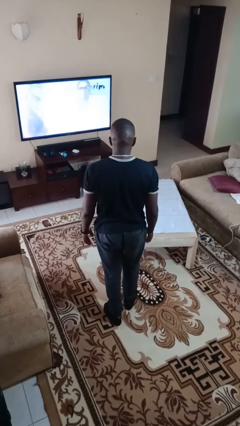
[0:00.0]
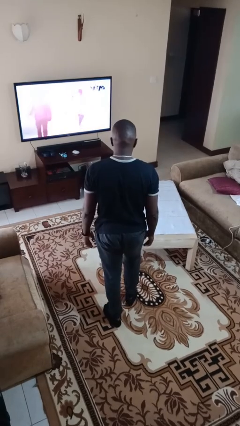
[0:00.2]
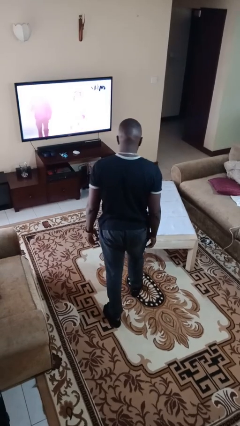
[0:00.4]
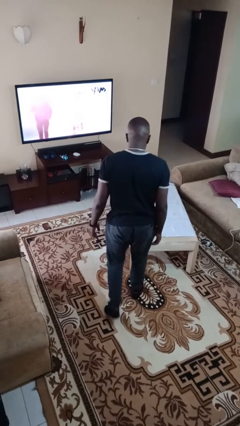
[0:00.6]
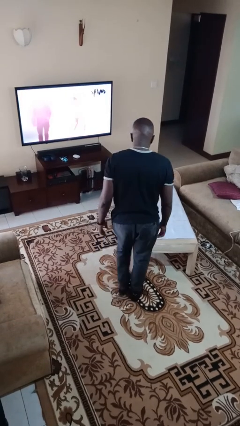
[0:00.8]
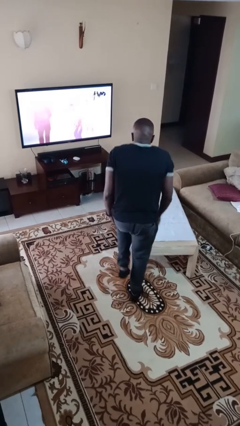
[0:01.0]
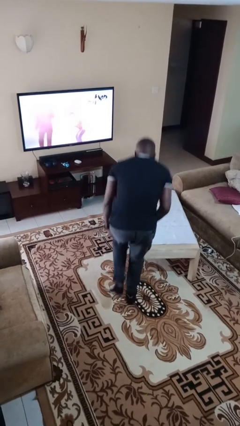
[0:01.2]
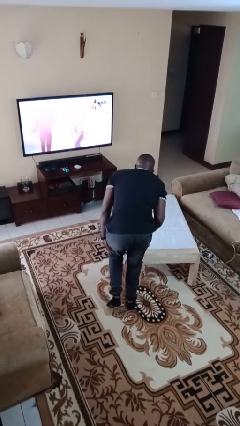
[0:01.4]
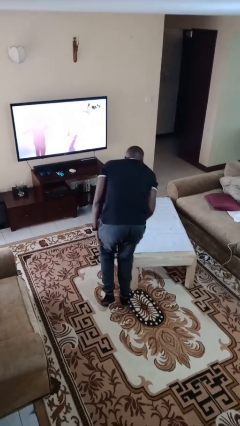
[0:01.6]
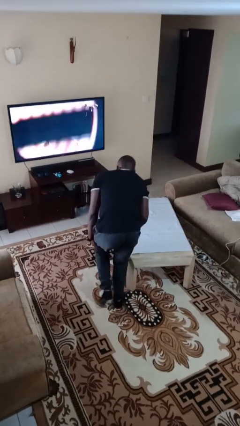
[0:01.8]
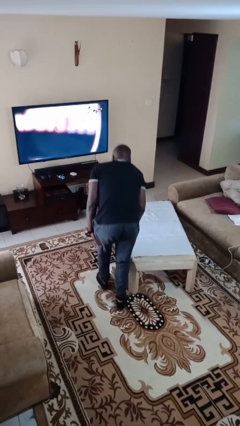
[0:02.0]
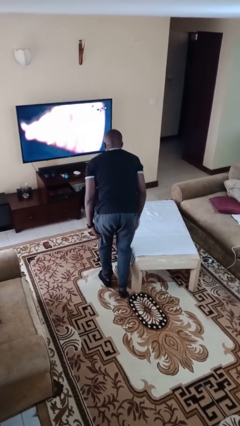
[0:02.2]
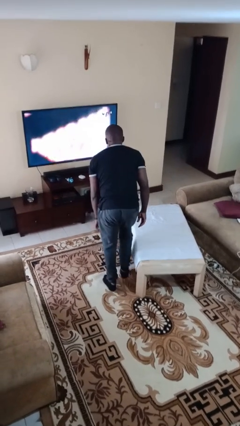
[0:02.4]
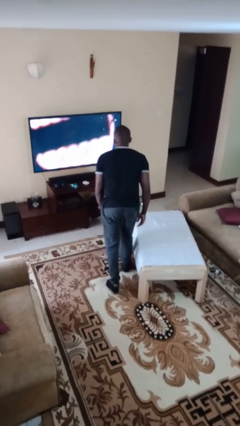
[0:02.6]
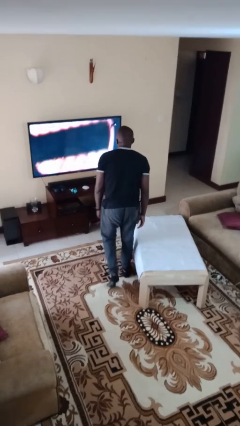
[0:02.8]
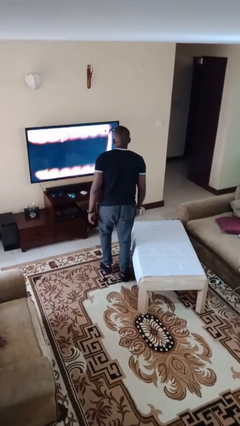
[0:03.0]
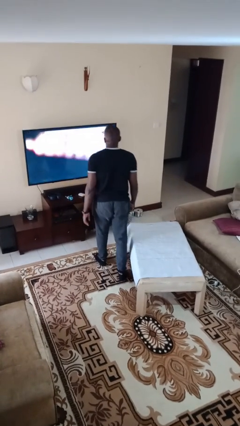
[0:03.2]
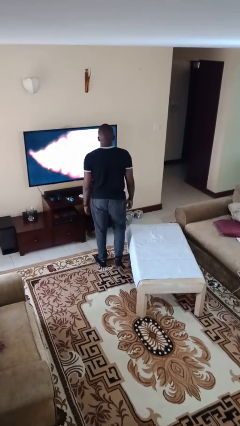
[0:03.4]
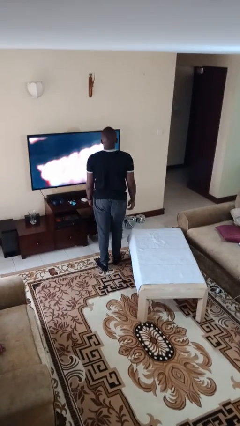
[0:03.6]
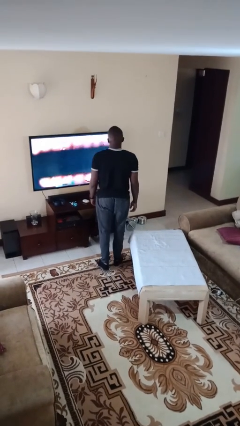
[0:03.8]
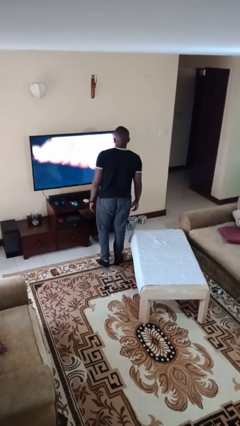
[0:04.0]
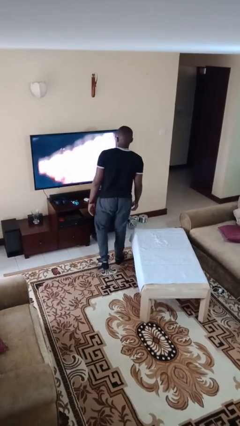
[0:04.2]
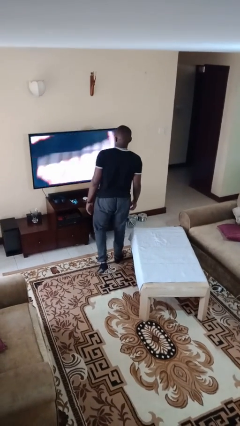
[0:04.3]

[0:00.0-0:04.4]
person bumps into table

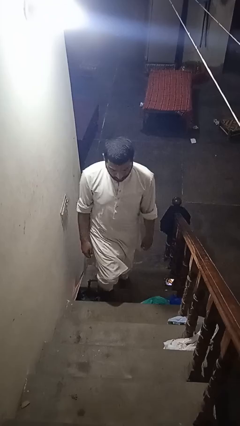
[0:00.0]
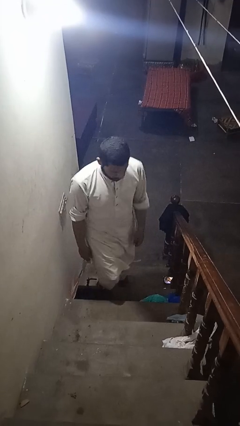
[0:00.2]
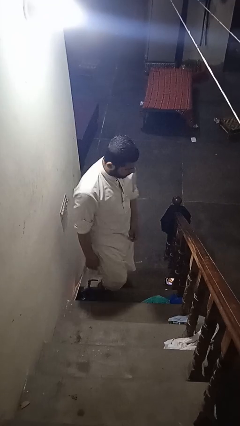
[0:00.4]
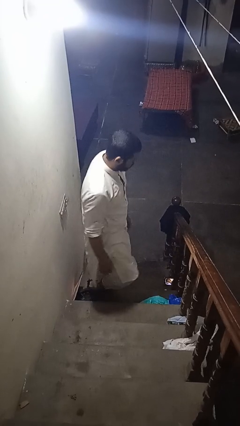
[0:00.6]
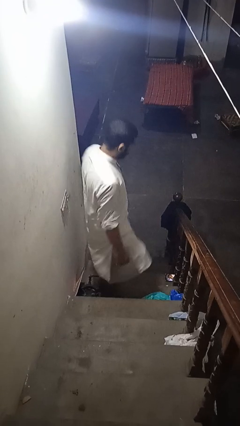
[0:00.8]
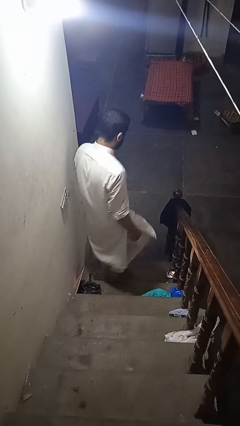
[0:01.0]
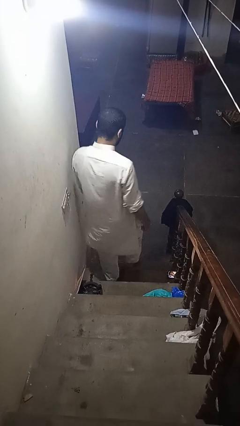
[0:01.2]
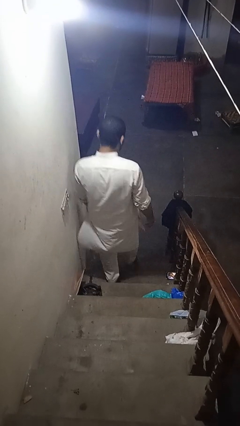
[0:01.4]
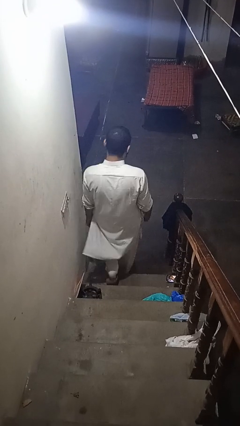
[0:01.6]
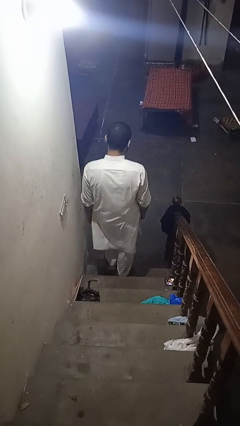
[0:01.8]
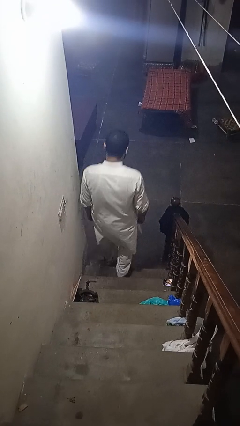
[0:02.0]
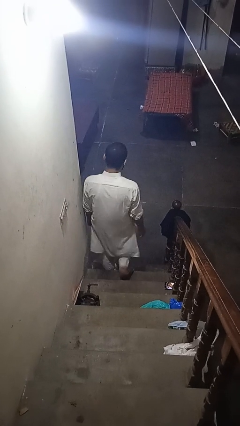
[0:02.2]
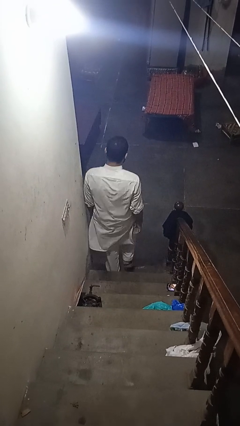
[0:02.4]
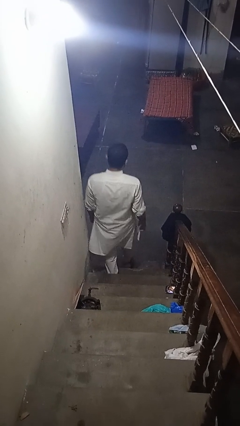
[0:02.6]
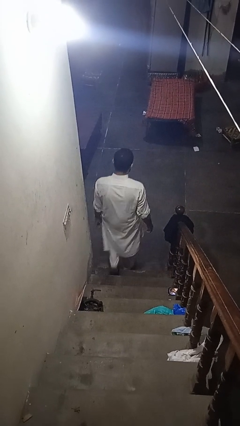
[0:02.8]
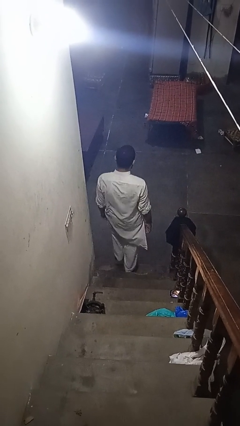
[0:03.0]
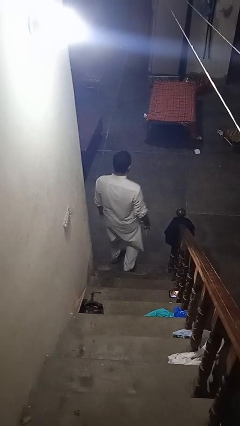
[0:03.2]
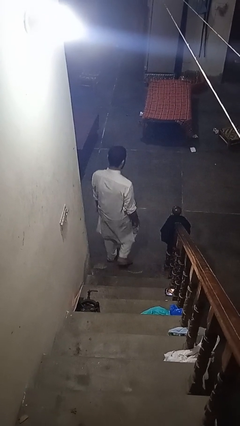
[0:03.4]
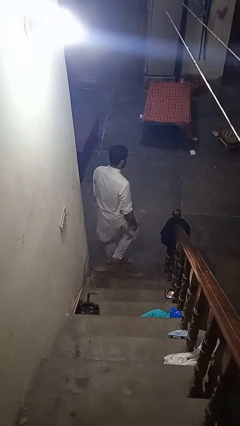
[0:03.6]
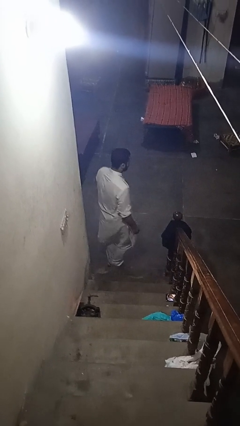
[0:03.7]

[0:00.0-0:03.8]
person climbs down stairs

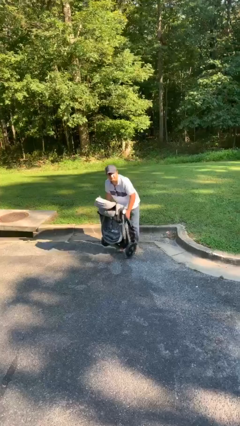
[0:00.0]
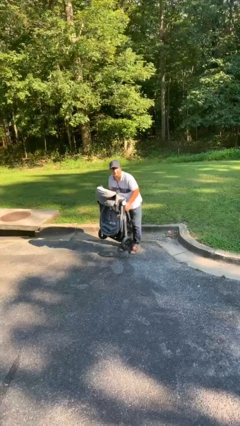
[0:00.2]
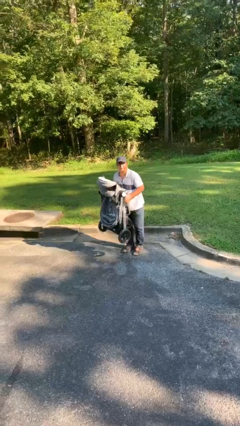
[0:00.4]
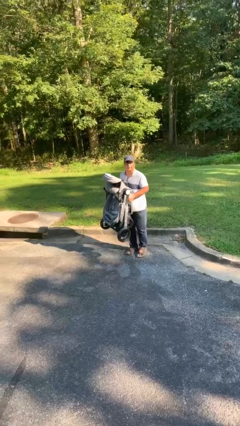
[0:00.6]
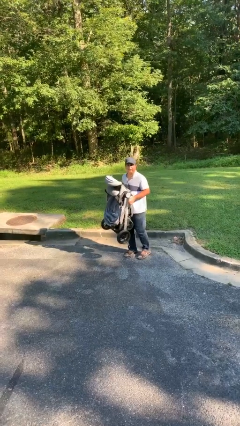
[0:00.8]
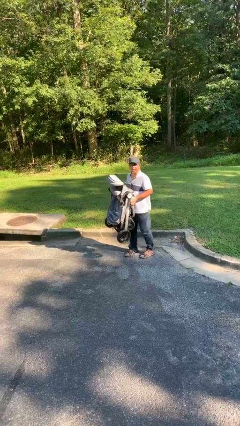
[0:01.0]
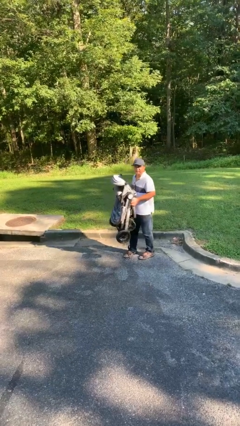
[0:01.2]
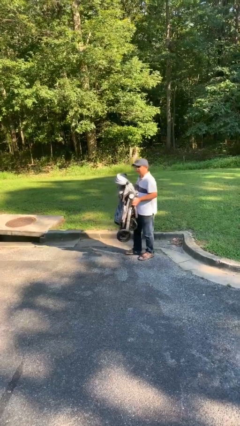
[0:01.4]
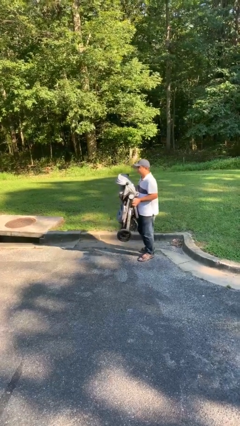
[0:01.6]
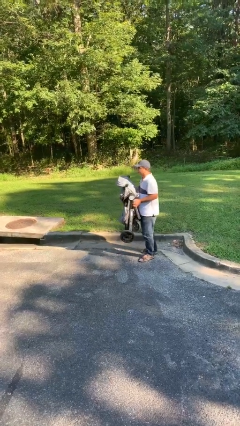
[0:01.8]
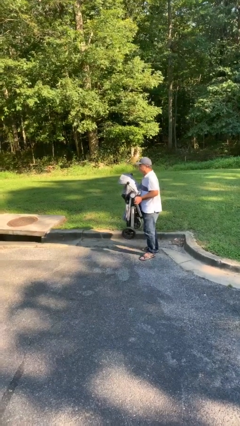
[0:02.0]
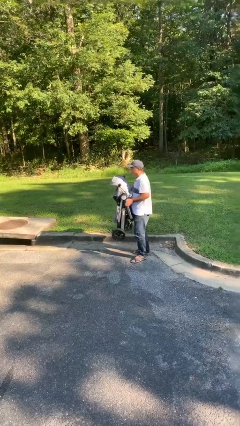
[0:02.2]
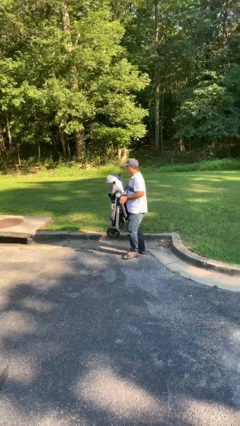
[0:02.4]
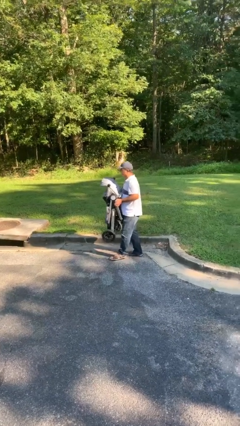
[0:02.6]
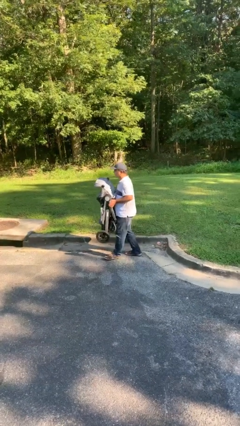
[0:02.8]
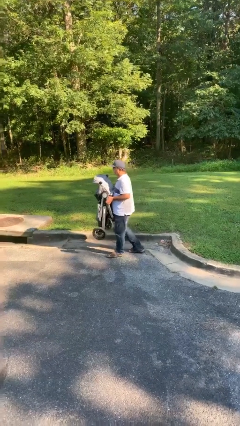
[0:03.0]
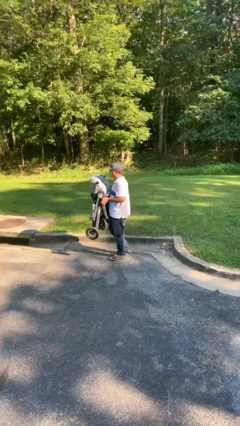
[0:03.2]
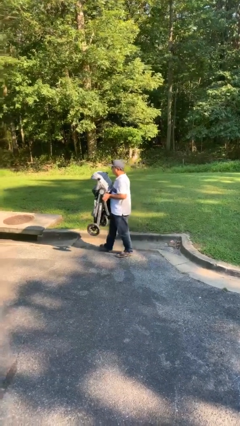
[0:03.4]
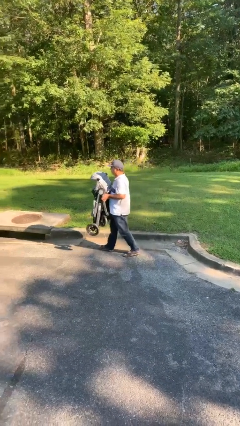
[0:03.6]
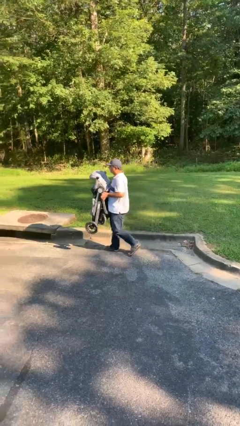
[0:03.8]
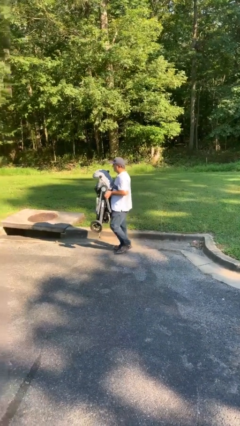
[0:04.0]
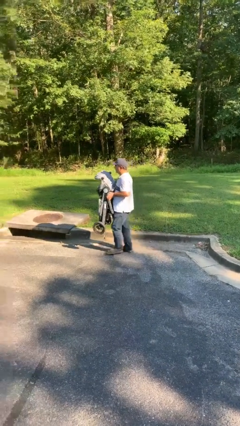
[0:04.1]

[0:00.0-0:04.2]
person carries heavy object

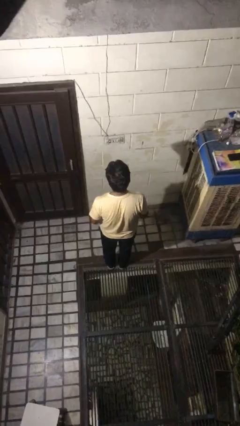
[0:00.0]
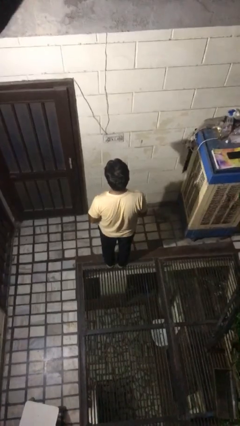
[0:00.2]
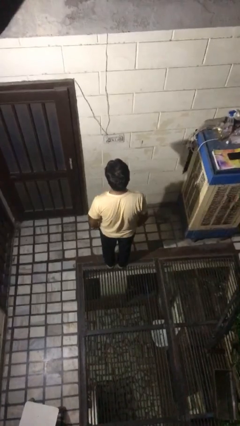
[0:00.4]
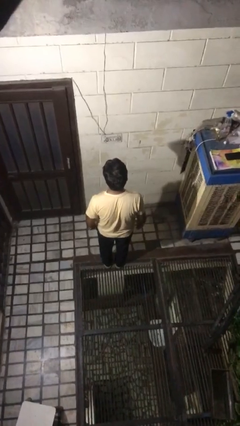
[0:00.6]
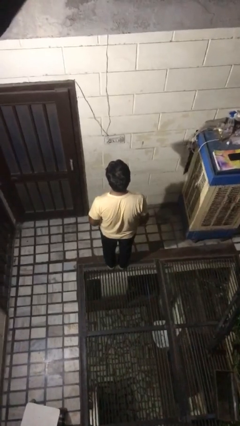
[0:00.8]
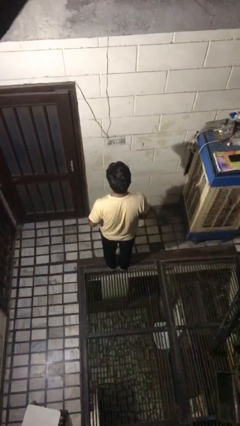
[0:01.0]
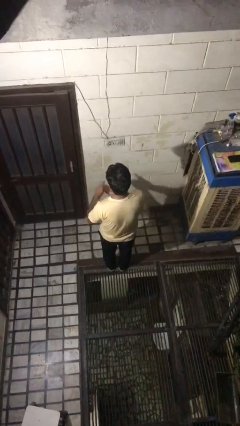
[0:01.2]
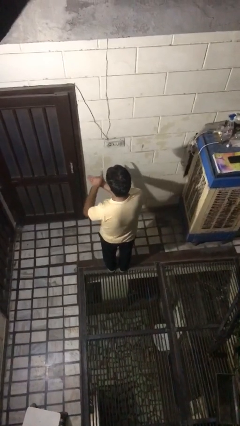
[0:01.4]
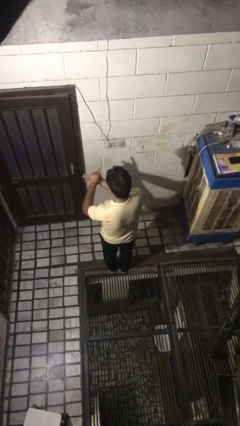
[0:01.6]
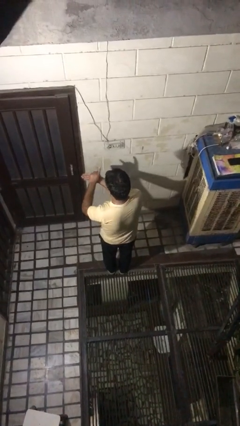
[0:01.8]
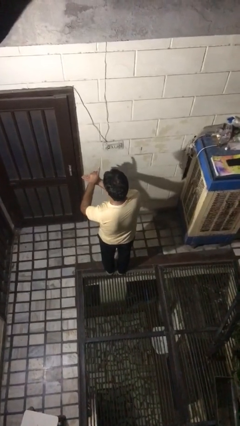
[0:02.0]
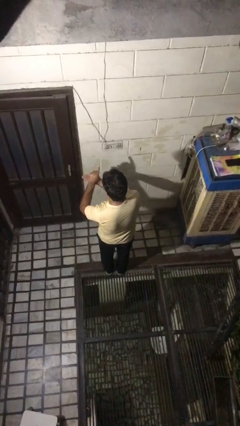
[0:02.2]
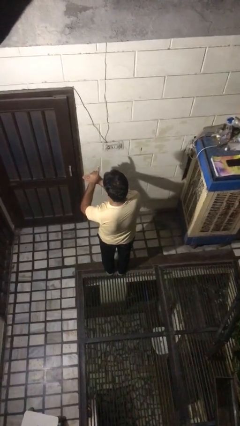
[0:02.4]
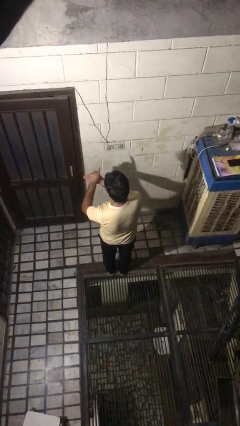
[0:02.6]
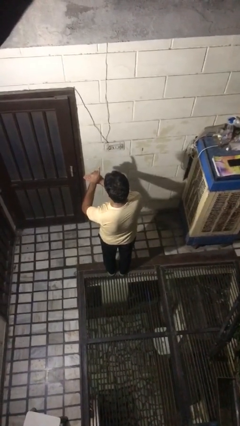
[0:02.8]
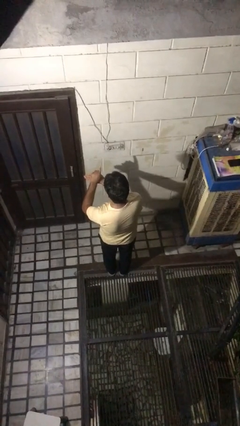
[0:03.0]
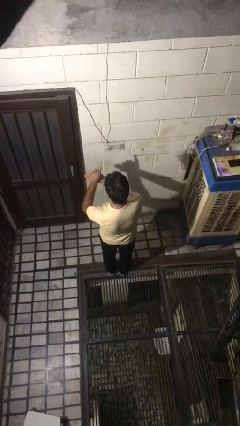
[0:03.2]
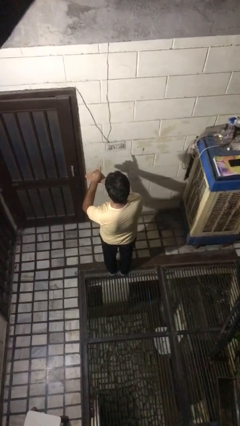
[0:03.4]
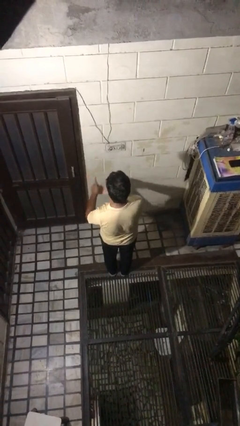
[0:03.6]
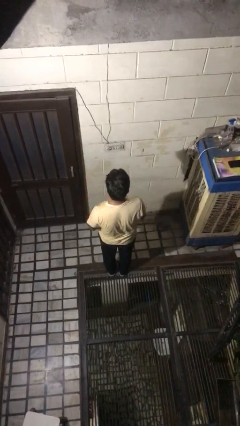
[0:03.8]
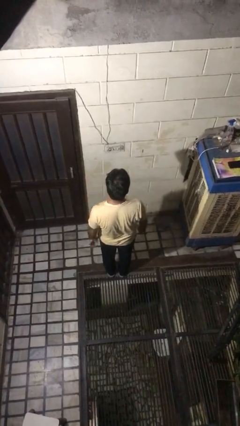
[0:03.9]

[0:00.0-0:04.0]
person gestures number one

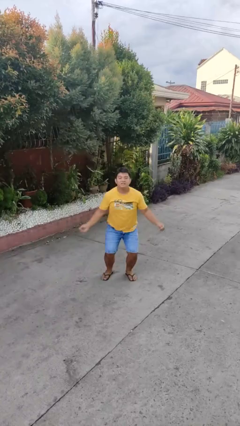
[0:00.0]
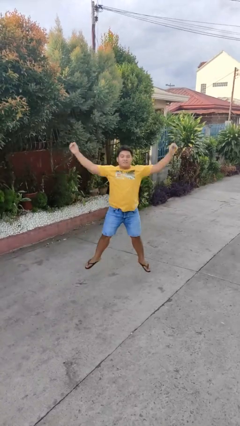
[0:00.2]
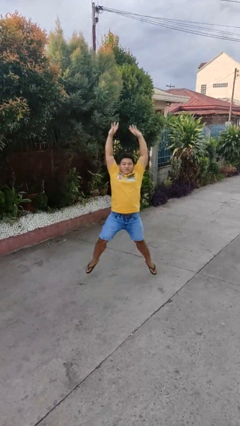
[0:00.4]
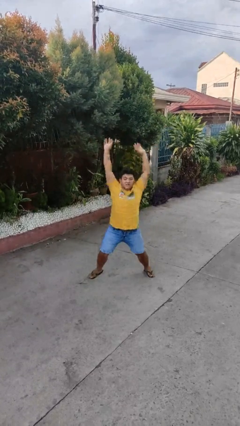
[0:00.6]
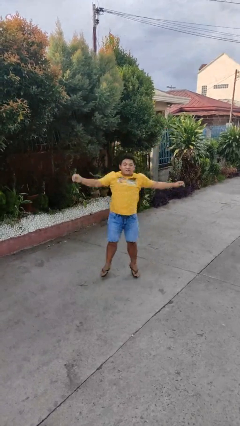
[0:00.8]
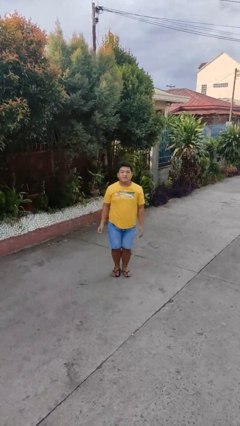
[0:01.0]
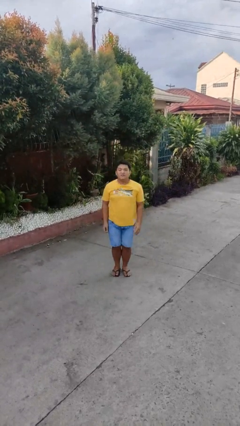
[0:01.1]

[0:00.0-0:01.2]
person exercises with jumping jacks
